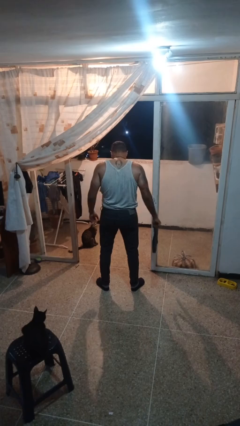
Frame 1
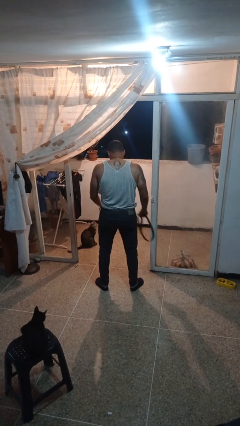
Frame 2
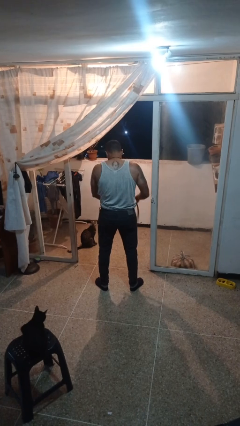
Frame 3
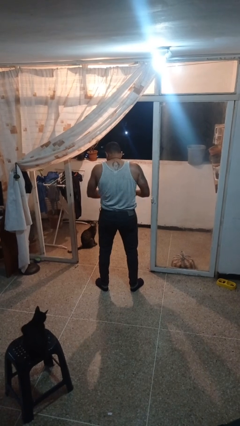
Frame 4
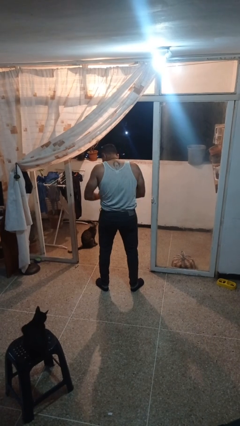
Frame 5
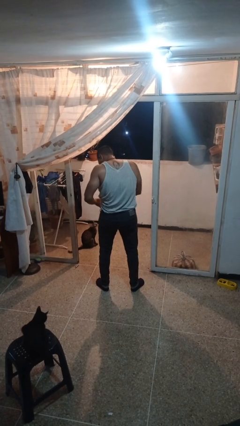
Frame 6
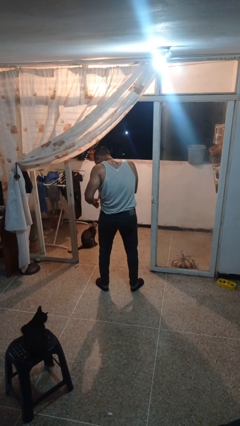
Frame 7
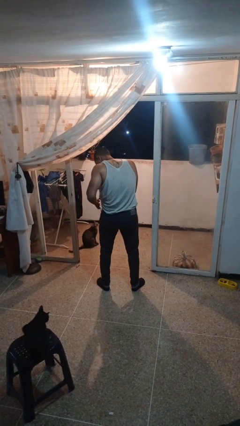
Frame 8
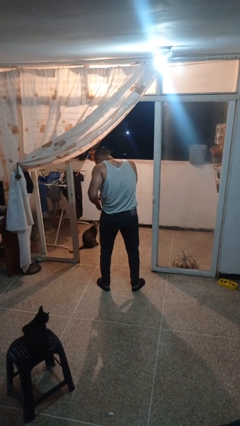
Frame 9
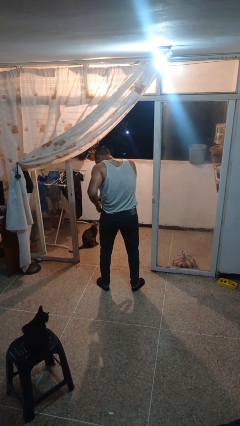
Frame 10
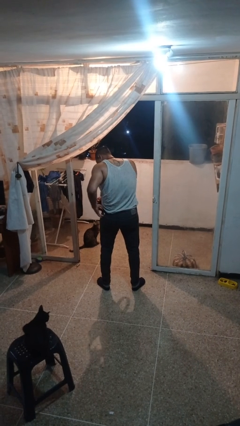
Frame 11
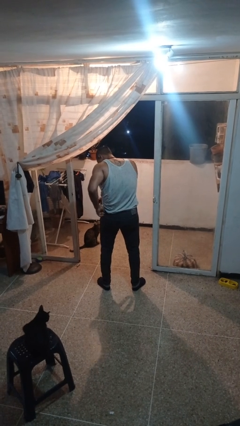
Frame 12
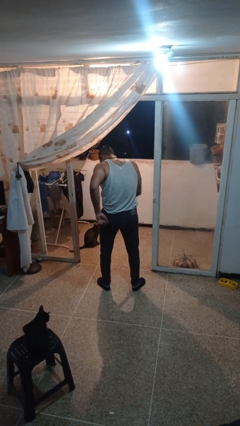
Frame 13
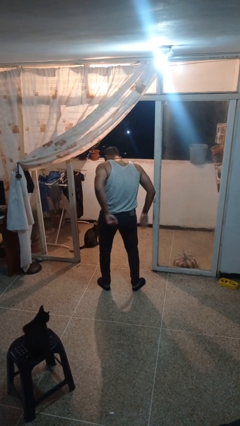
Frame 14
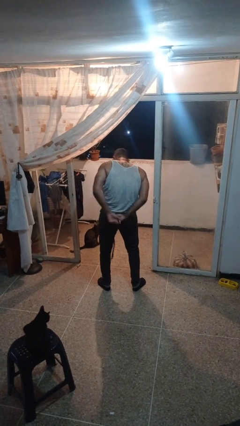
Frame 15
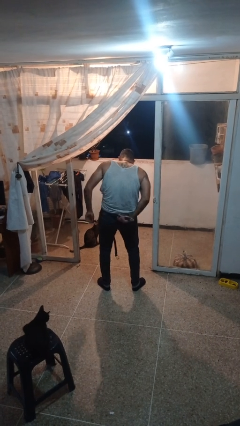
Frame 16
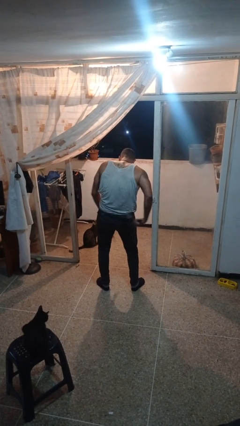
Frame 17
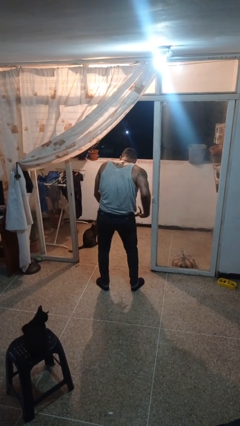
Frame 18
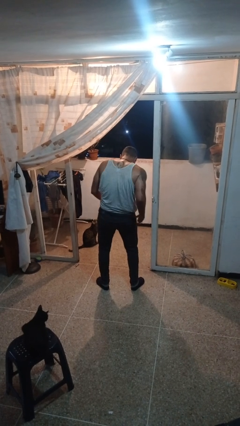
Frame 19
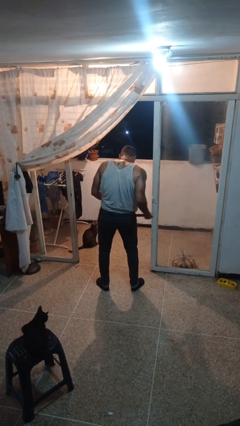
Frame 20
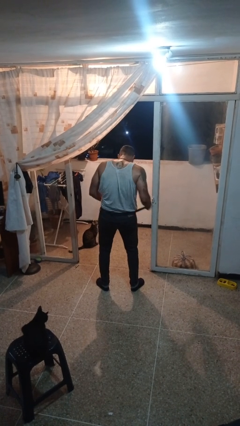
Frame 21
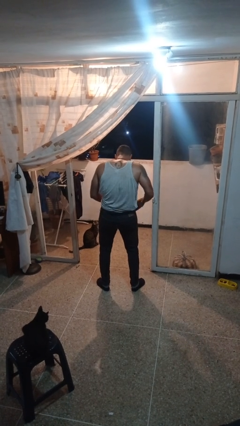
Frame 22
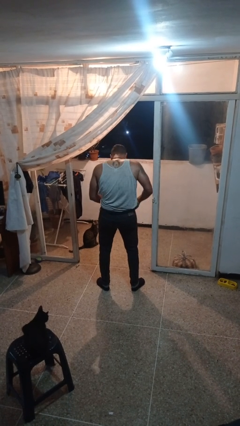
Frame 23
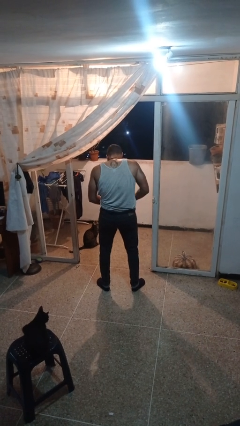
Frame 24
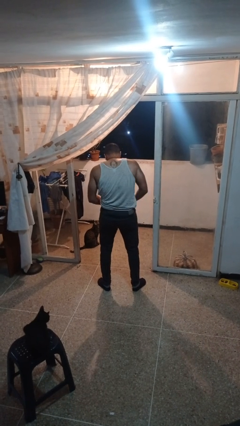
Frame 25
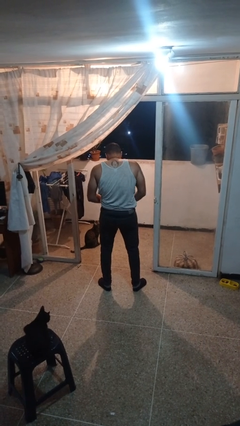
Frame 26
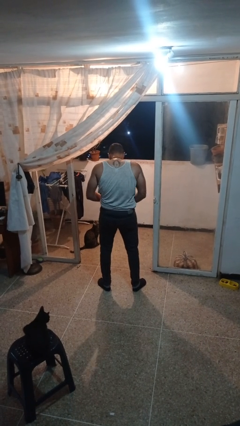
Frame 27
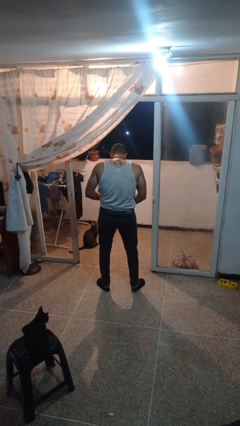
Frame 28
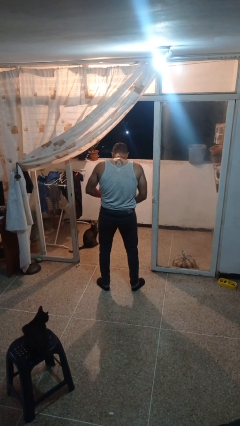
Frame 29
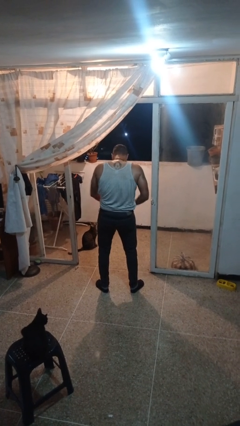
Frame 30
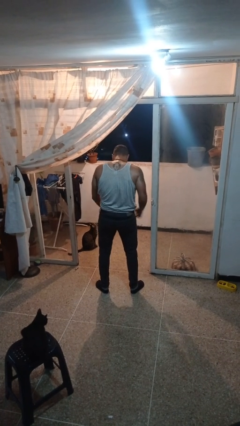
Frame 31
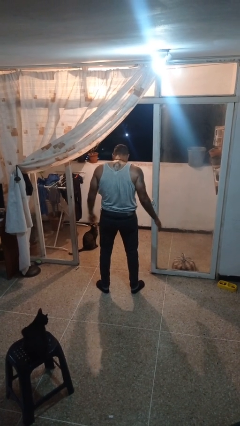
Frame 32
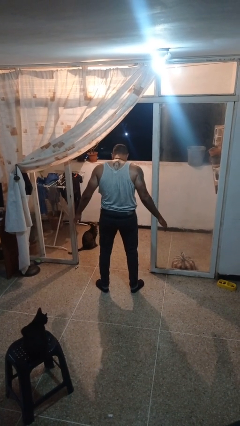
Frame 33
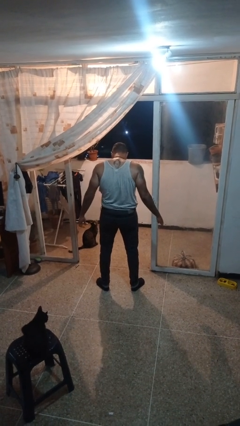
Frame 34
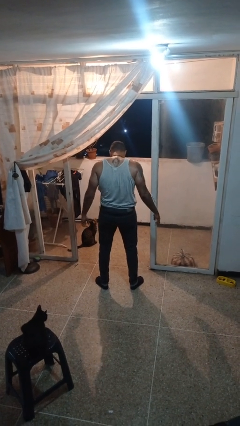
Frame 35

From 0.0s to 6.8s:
person puts on belt

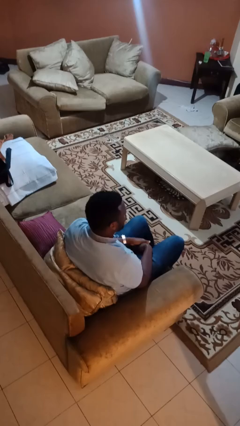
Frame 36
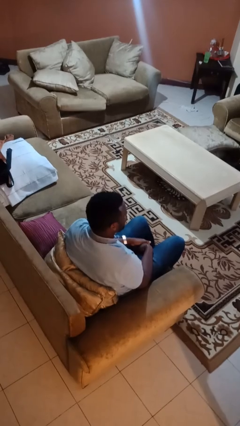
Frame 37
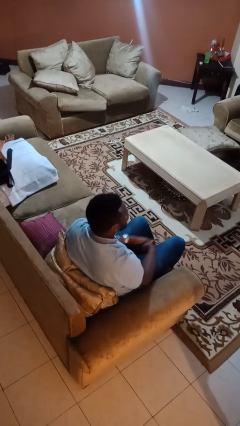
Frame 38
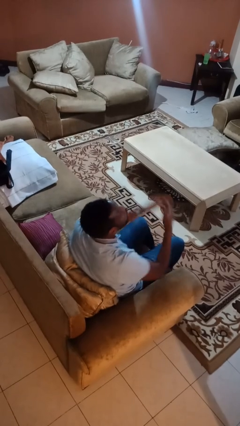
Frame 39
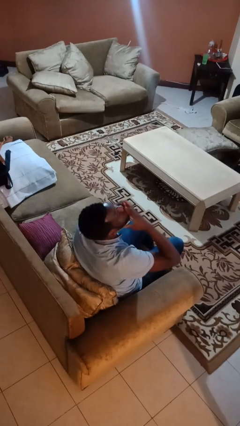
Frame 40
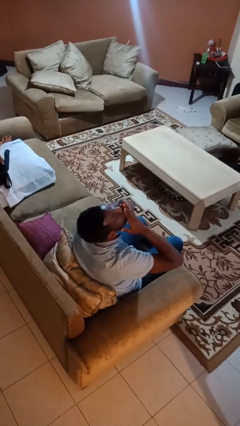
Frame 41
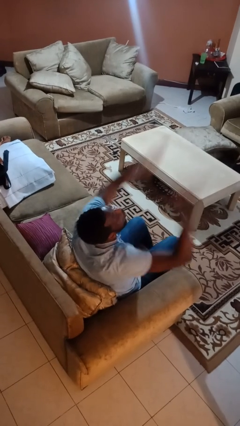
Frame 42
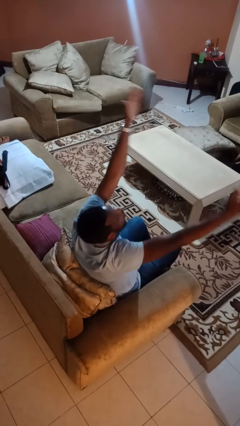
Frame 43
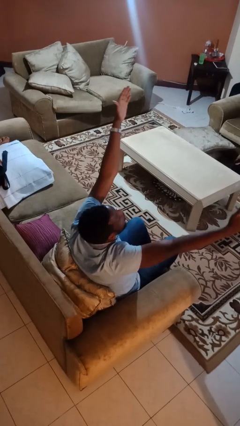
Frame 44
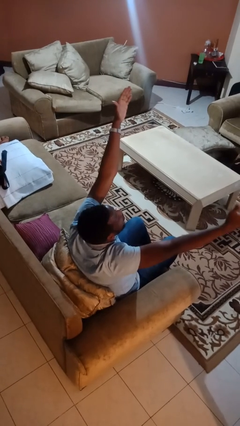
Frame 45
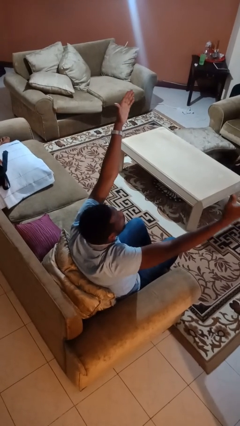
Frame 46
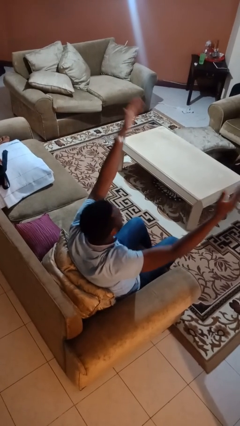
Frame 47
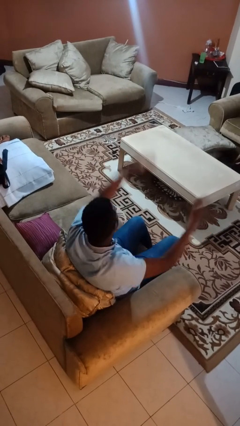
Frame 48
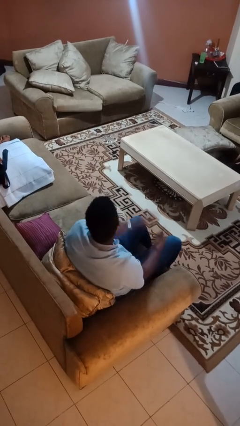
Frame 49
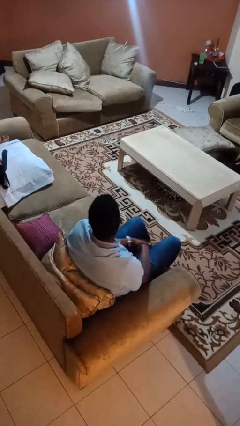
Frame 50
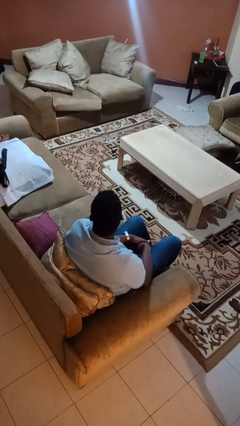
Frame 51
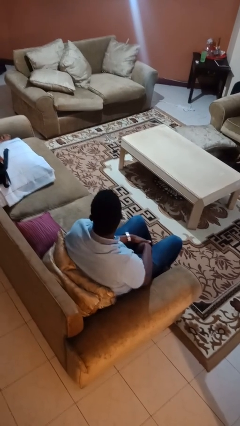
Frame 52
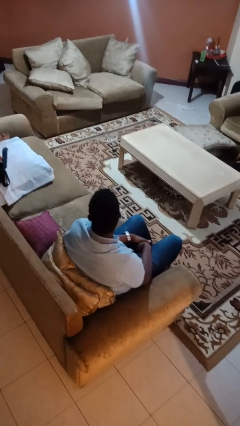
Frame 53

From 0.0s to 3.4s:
person gestures blow kiss

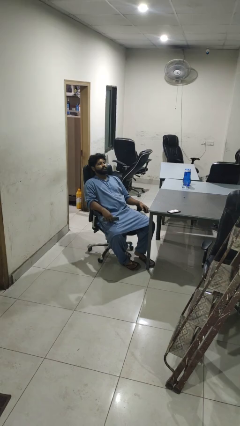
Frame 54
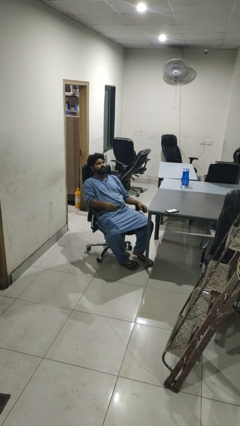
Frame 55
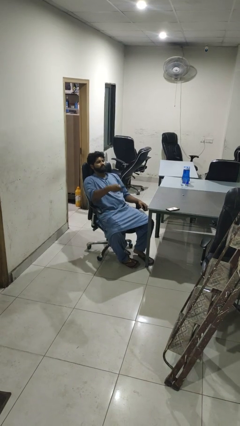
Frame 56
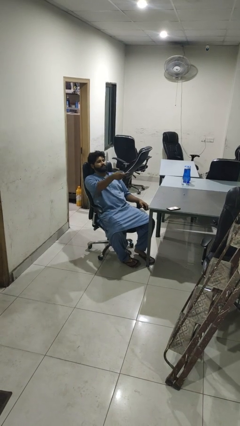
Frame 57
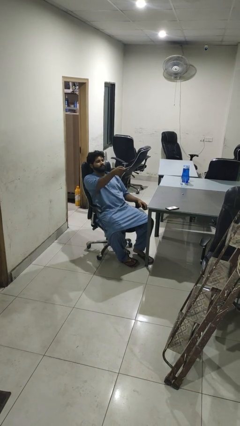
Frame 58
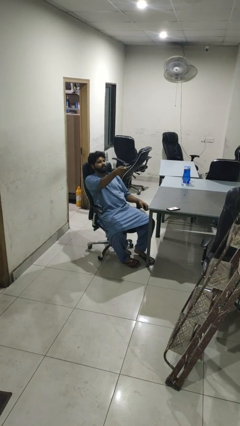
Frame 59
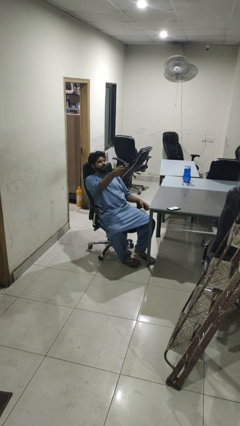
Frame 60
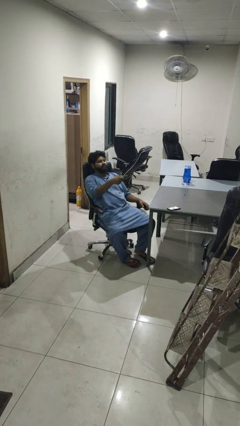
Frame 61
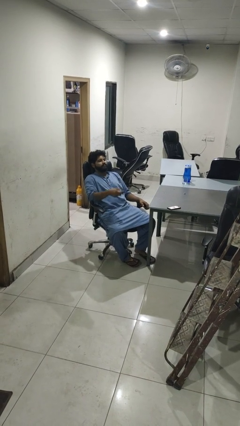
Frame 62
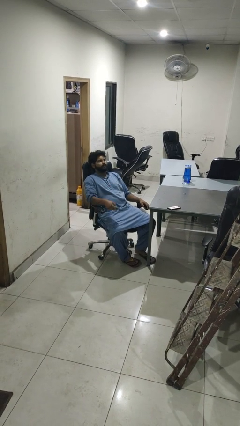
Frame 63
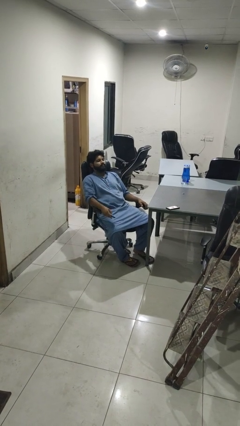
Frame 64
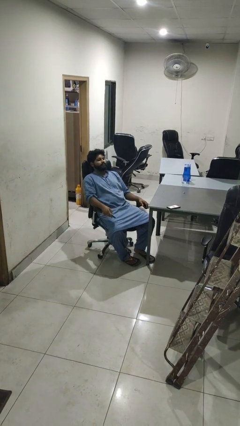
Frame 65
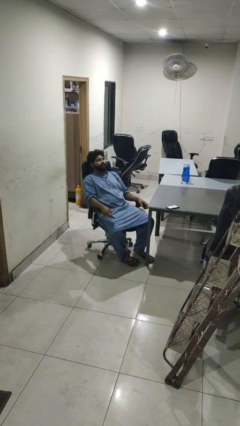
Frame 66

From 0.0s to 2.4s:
person uses television remote

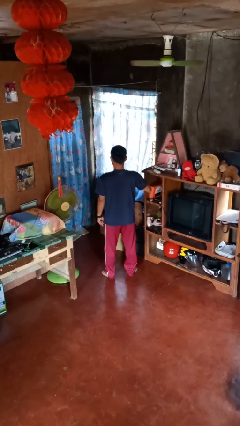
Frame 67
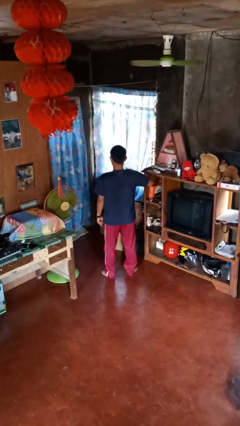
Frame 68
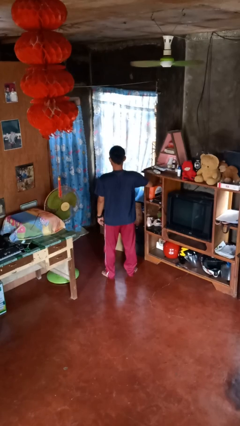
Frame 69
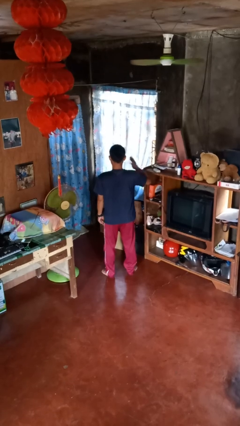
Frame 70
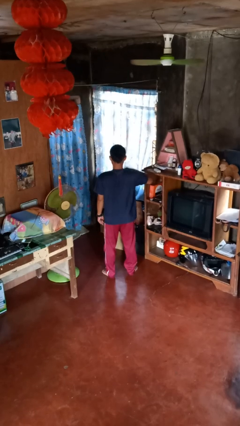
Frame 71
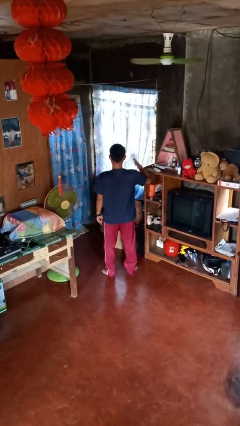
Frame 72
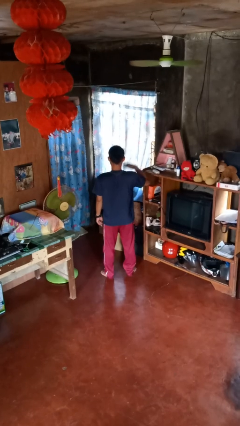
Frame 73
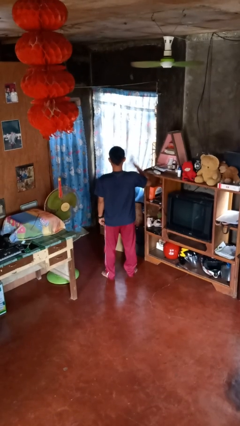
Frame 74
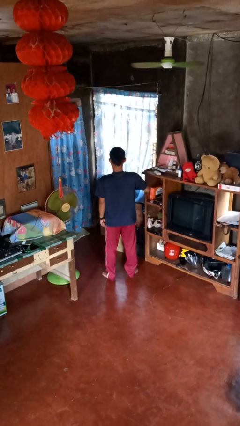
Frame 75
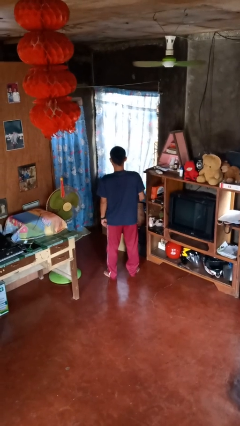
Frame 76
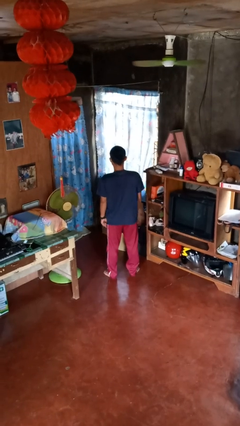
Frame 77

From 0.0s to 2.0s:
person drums on chest

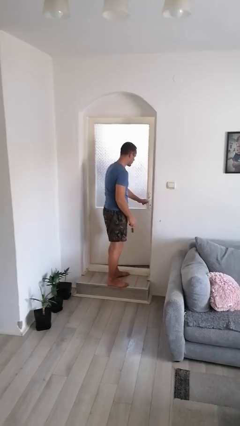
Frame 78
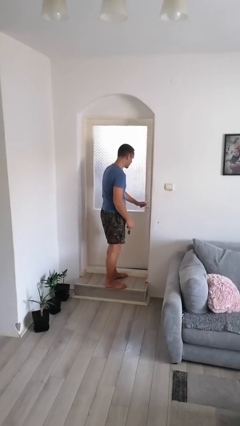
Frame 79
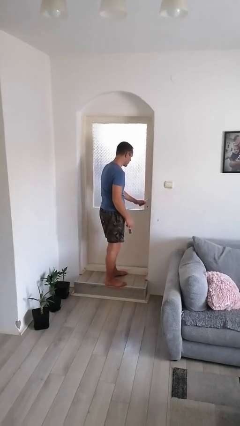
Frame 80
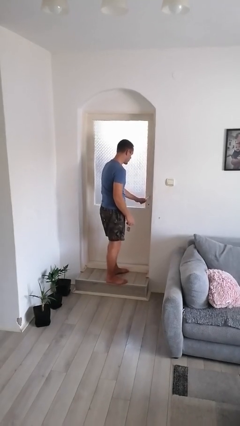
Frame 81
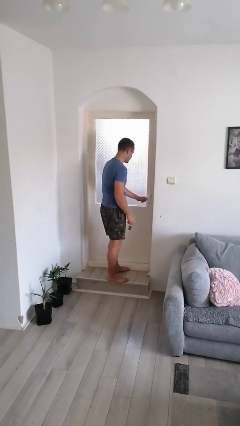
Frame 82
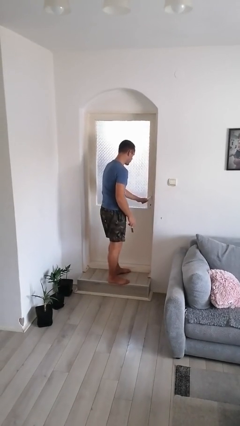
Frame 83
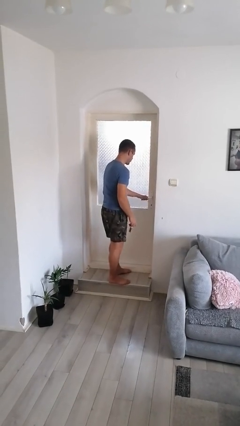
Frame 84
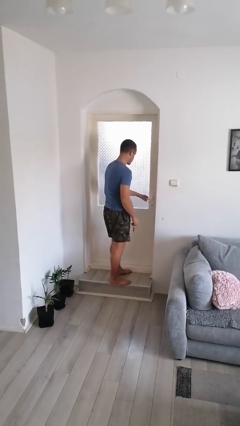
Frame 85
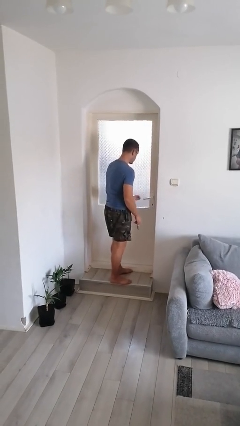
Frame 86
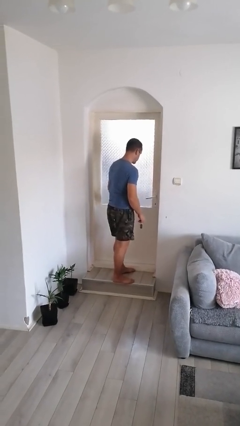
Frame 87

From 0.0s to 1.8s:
person closes facility door

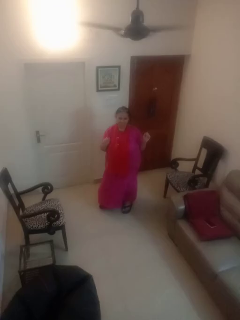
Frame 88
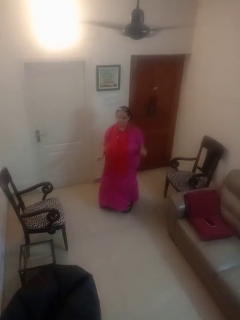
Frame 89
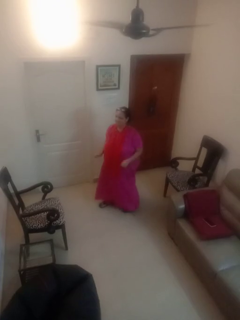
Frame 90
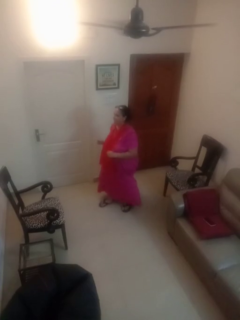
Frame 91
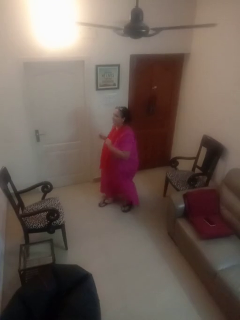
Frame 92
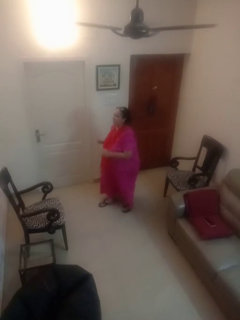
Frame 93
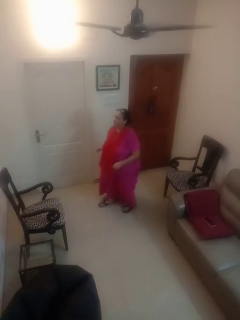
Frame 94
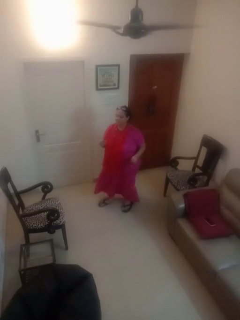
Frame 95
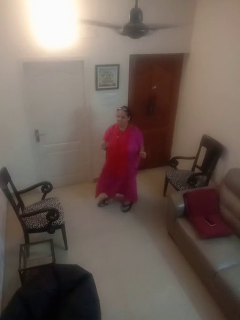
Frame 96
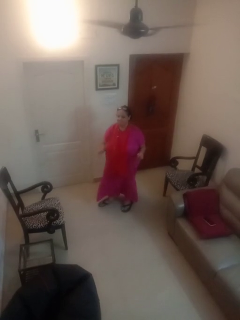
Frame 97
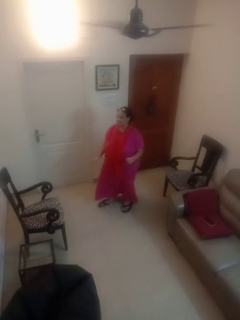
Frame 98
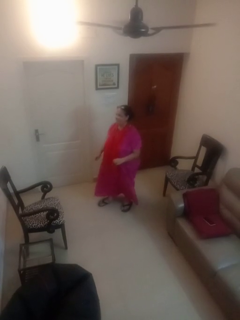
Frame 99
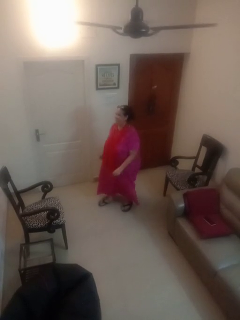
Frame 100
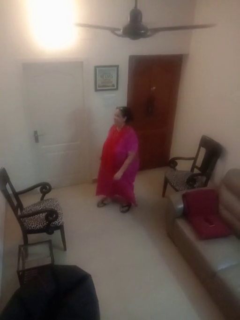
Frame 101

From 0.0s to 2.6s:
person dances in place
